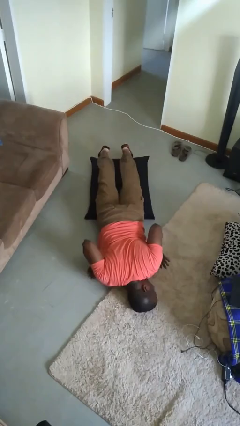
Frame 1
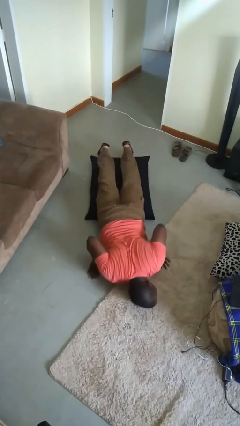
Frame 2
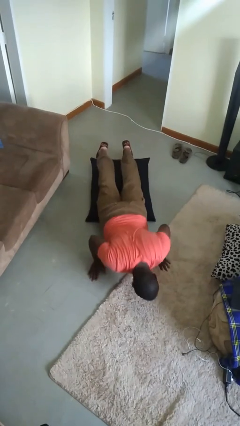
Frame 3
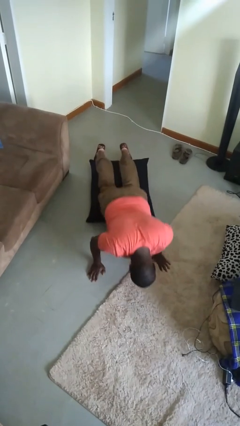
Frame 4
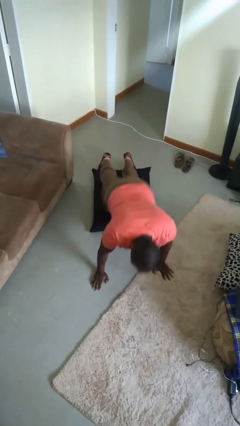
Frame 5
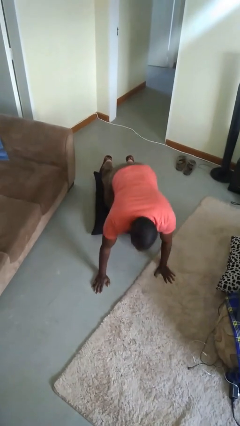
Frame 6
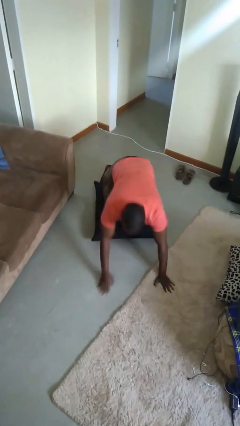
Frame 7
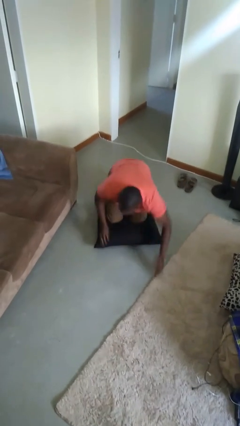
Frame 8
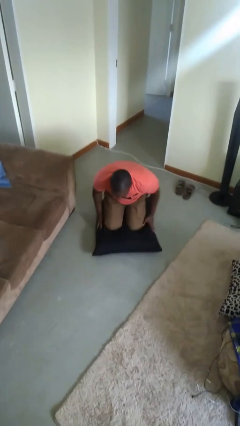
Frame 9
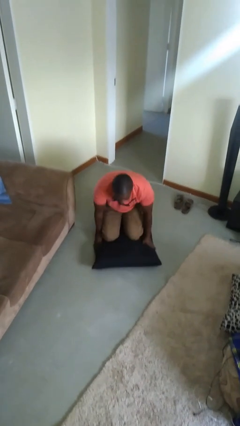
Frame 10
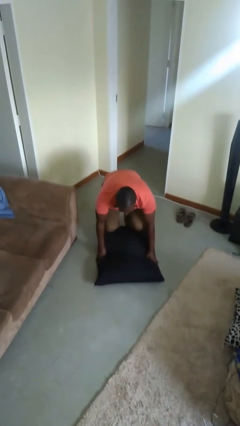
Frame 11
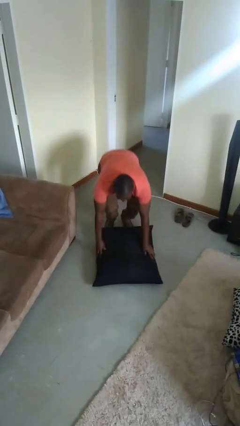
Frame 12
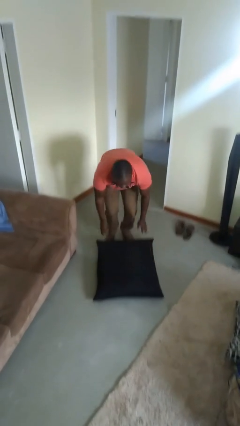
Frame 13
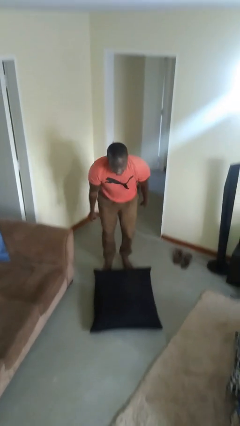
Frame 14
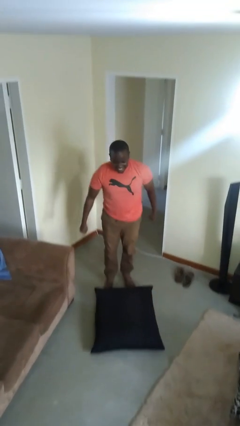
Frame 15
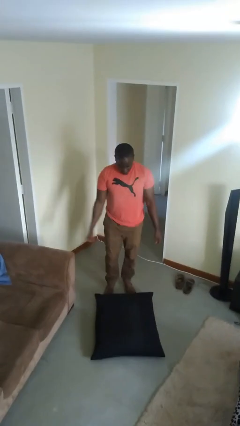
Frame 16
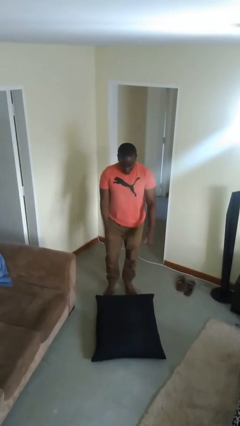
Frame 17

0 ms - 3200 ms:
person stands up from floor

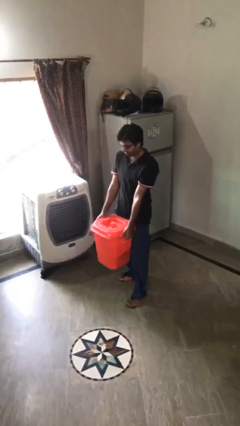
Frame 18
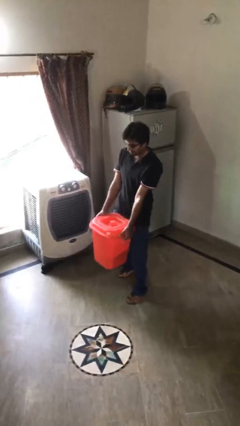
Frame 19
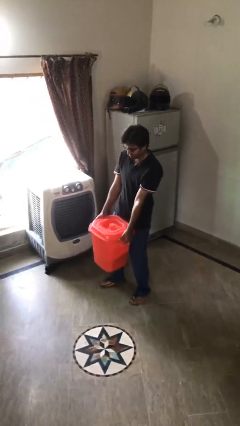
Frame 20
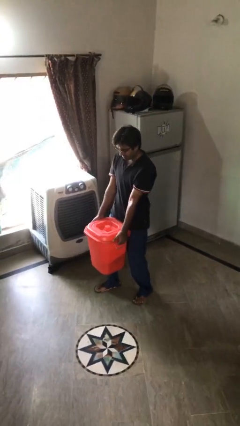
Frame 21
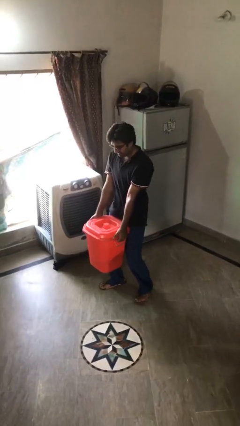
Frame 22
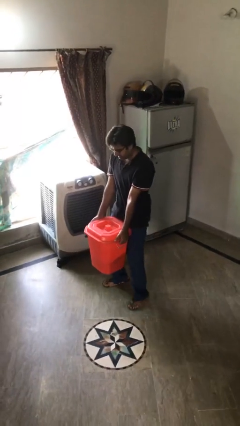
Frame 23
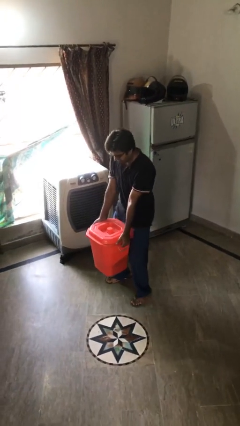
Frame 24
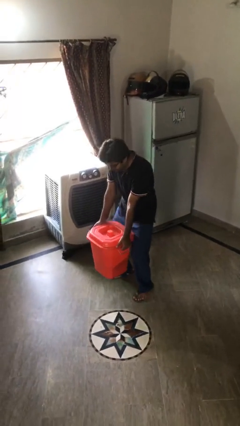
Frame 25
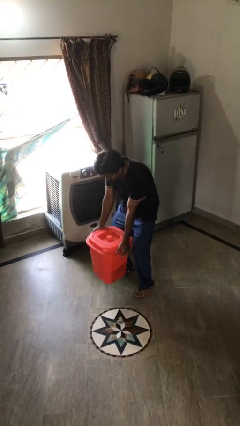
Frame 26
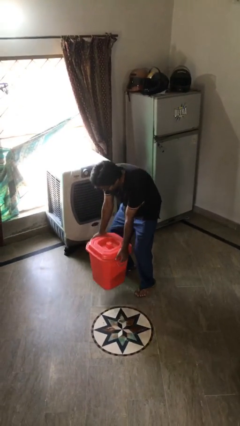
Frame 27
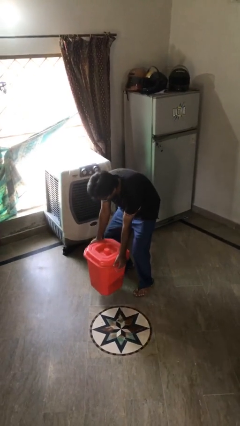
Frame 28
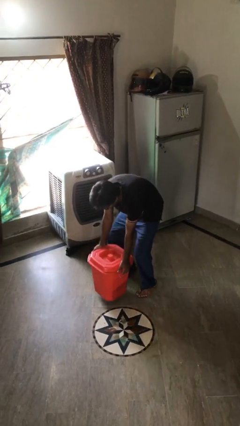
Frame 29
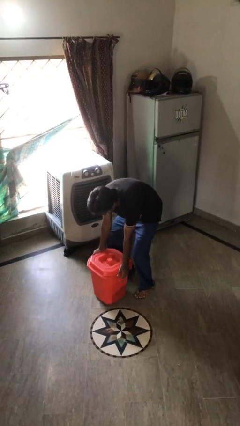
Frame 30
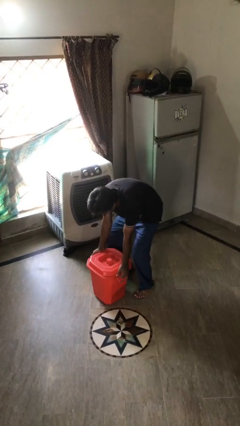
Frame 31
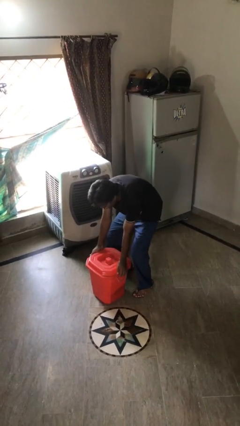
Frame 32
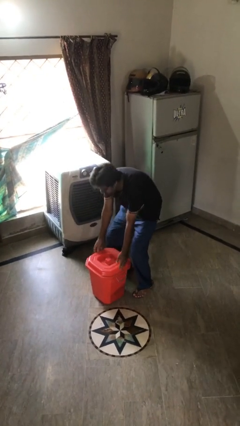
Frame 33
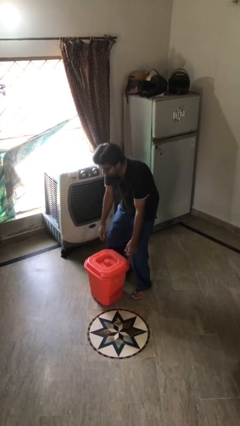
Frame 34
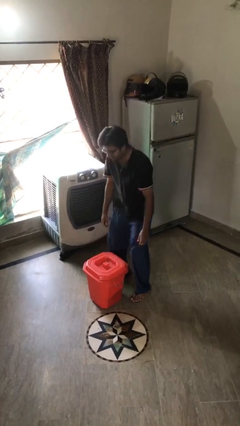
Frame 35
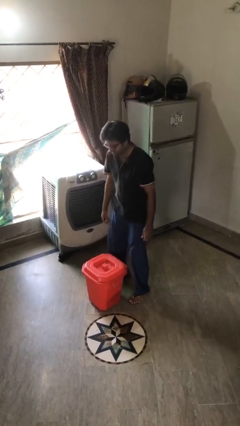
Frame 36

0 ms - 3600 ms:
person puts down object on floor

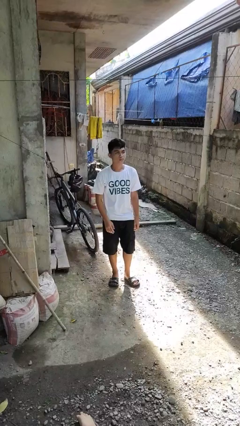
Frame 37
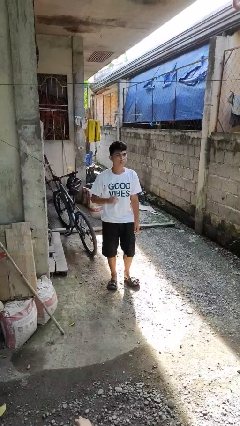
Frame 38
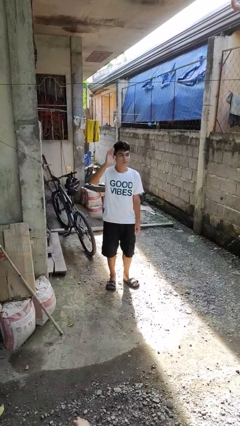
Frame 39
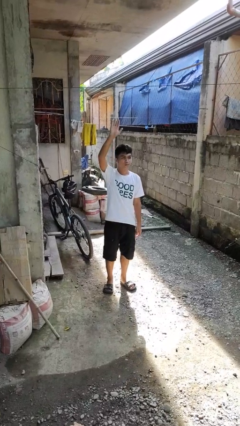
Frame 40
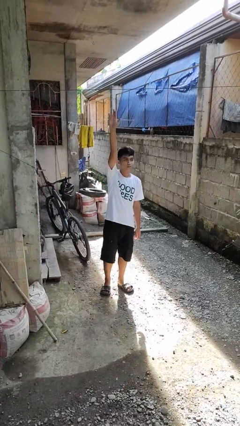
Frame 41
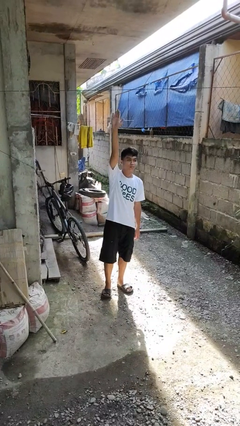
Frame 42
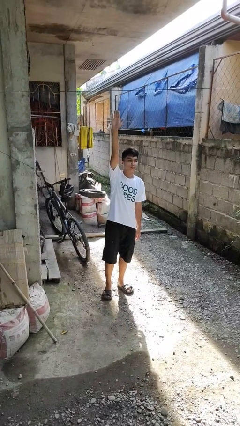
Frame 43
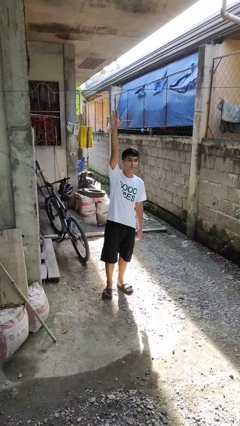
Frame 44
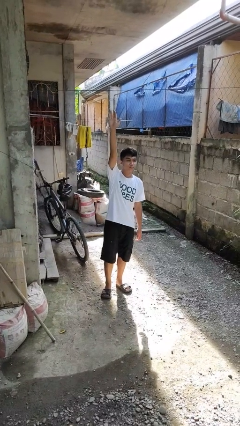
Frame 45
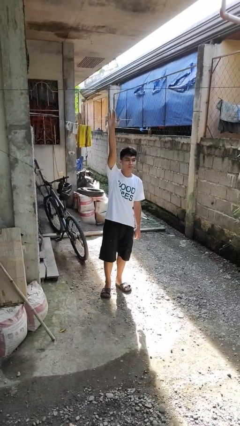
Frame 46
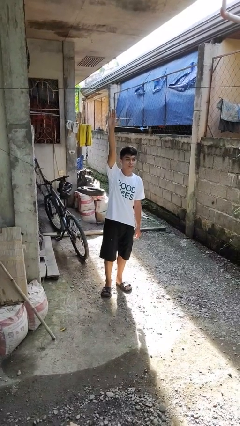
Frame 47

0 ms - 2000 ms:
person gestures raise hand

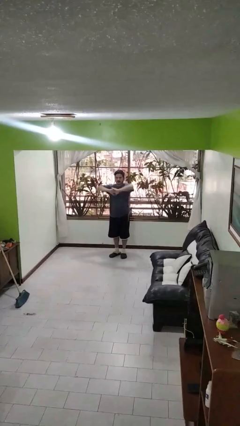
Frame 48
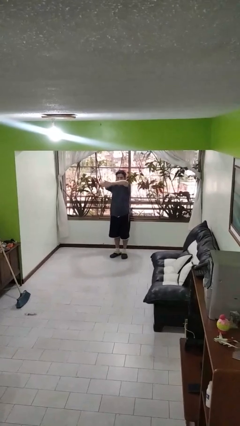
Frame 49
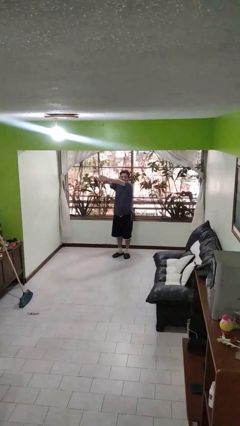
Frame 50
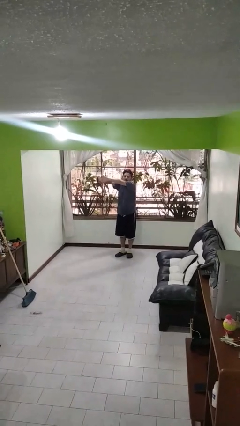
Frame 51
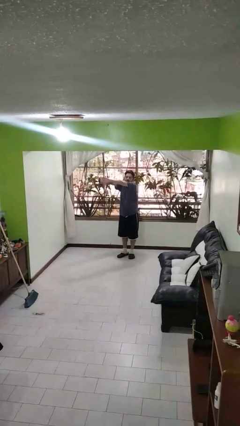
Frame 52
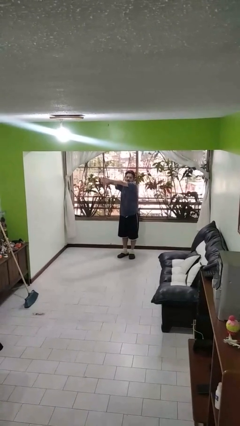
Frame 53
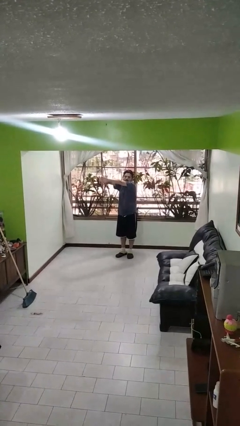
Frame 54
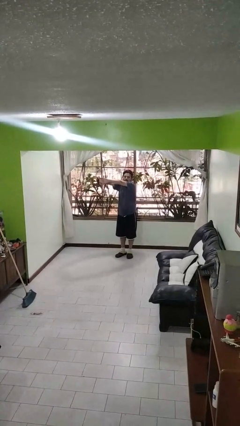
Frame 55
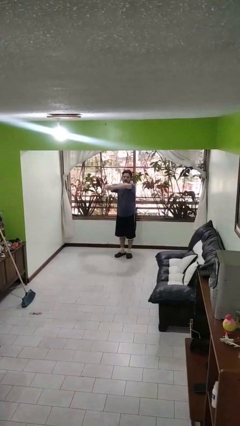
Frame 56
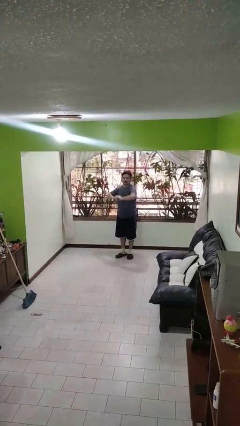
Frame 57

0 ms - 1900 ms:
person stretches arms to side

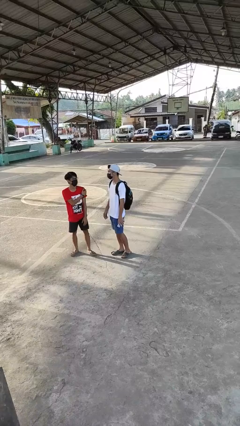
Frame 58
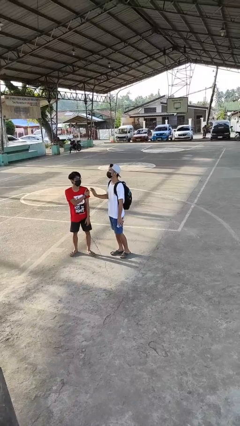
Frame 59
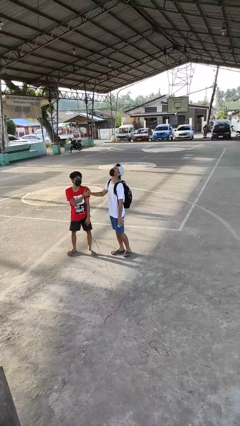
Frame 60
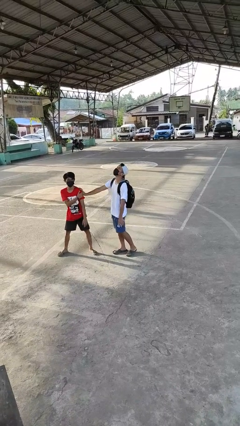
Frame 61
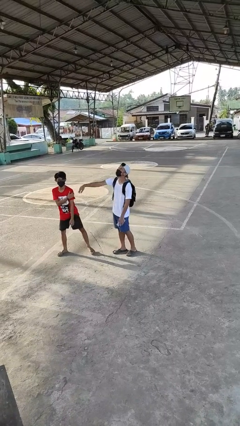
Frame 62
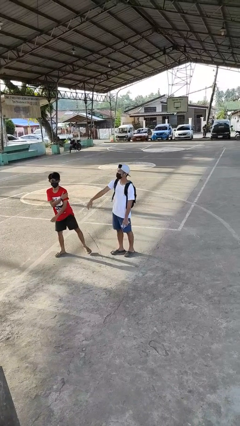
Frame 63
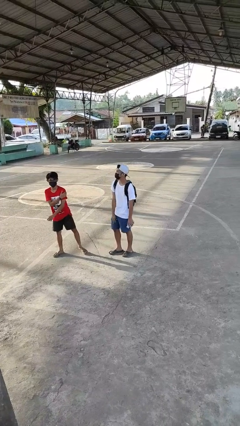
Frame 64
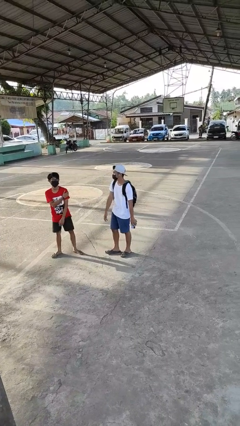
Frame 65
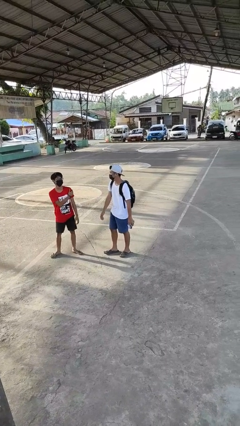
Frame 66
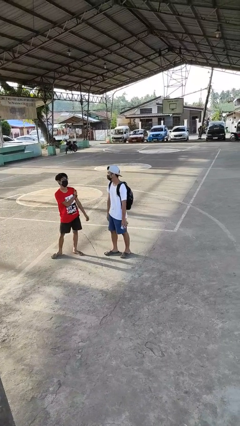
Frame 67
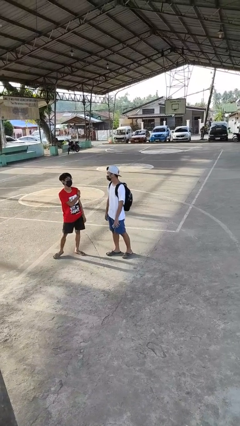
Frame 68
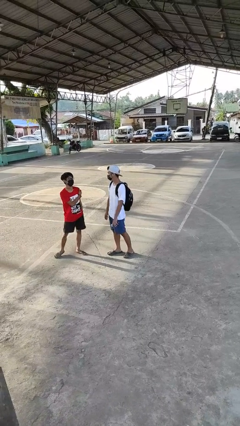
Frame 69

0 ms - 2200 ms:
person shoves person

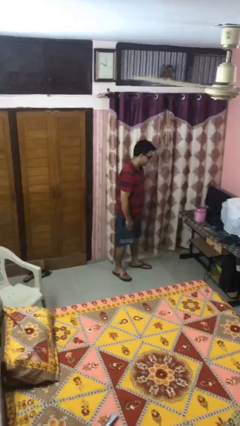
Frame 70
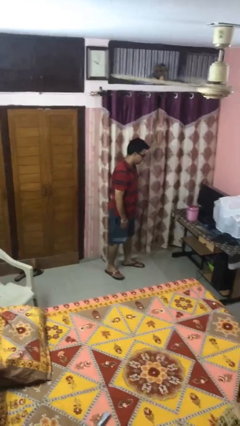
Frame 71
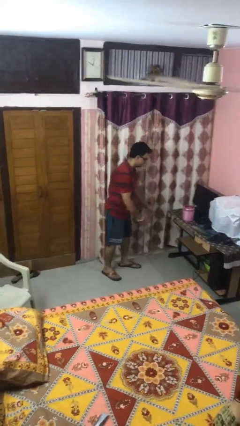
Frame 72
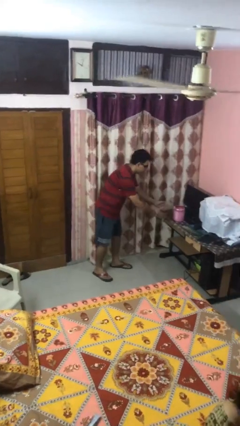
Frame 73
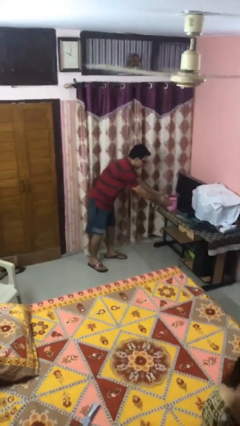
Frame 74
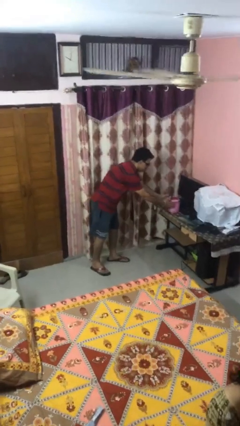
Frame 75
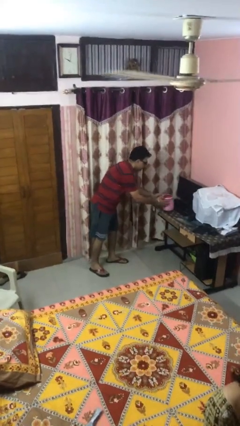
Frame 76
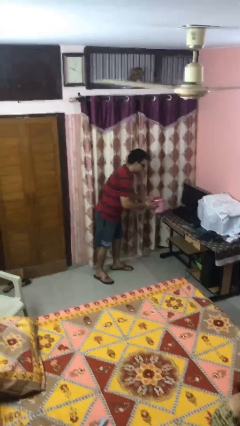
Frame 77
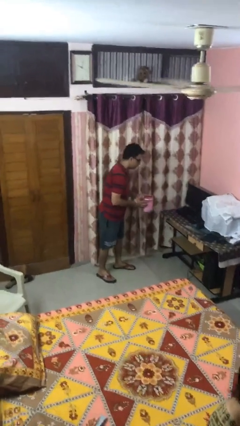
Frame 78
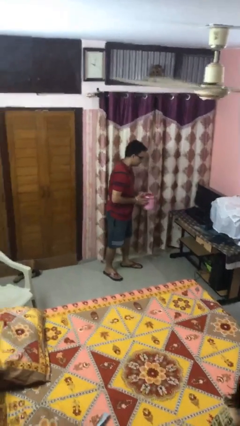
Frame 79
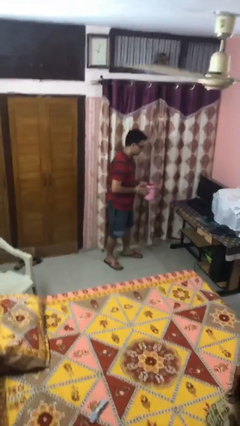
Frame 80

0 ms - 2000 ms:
person picks up object from countertop

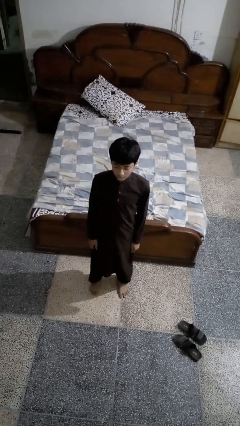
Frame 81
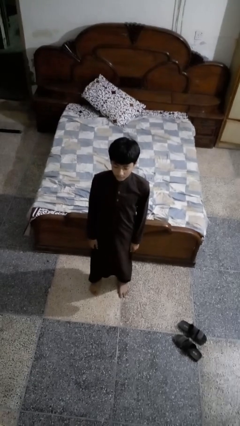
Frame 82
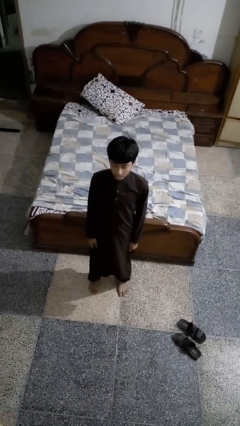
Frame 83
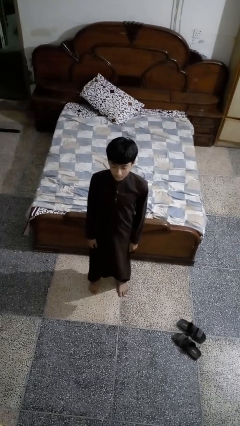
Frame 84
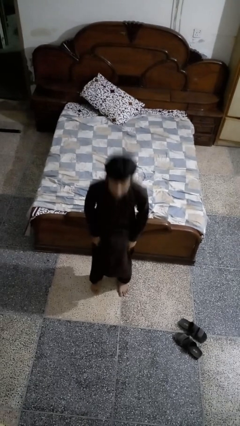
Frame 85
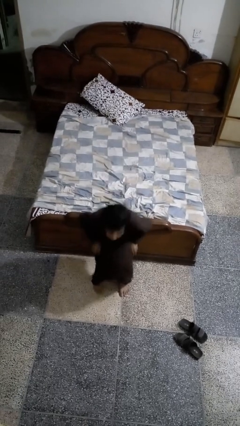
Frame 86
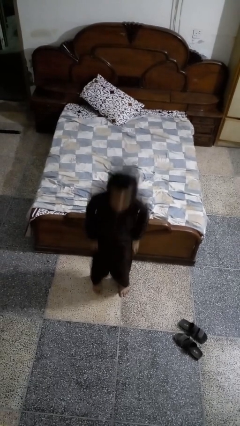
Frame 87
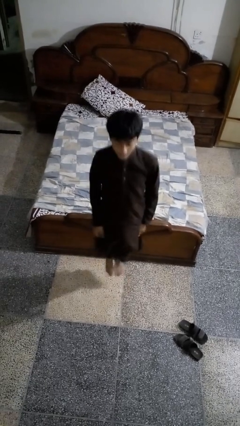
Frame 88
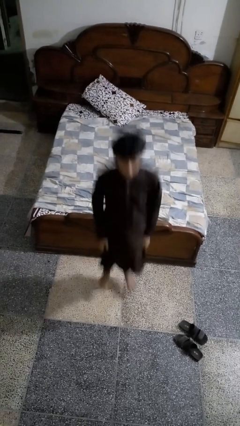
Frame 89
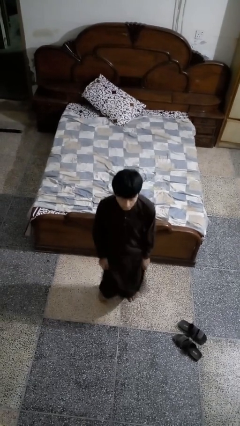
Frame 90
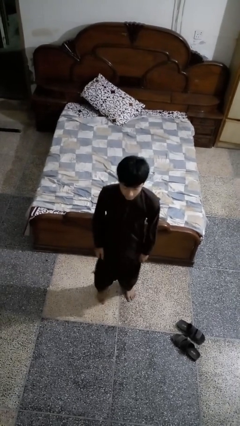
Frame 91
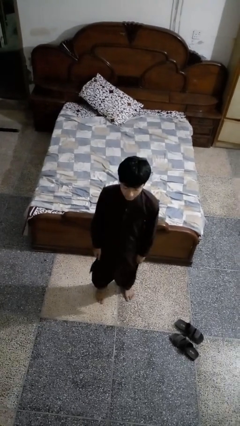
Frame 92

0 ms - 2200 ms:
person jumps
